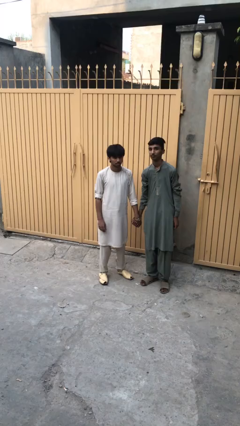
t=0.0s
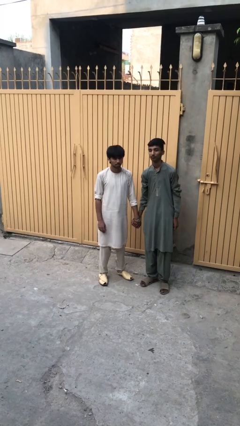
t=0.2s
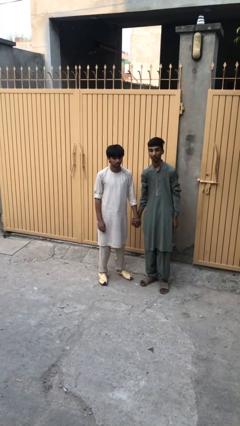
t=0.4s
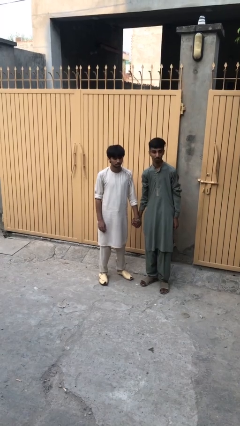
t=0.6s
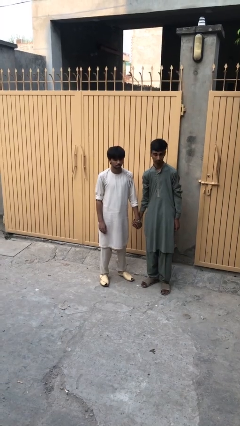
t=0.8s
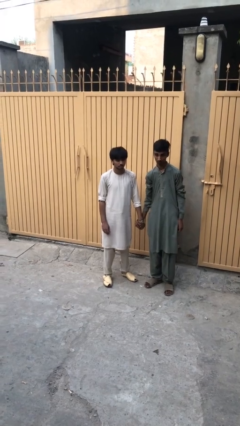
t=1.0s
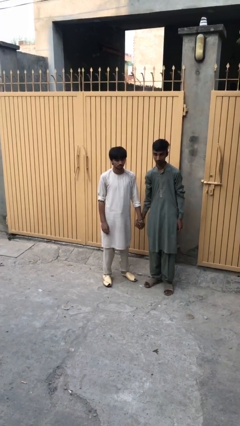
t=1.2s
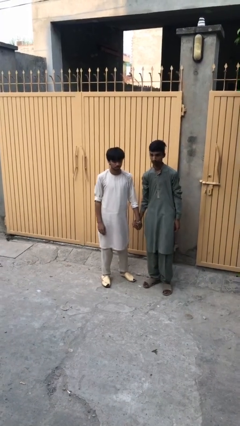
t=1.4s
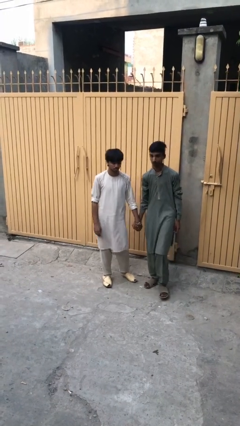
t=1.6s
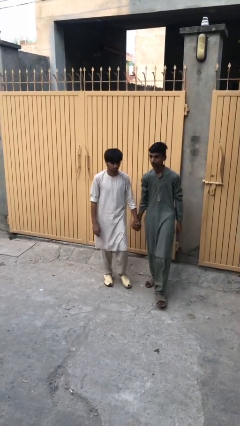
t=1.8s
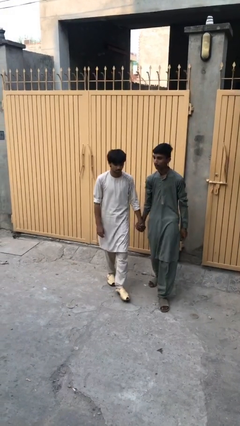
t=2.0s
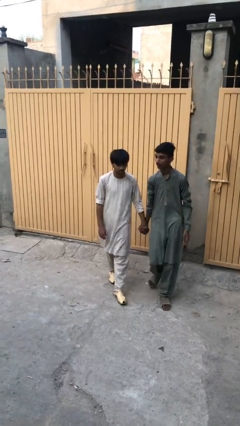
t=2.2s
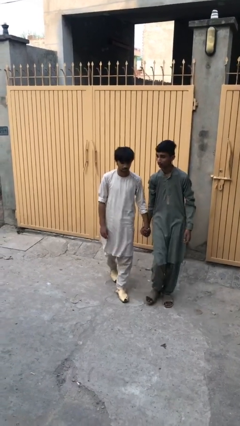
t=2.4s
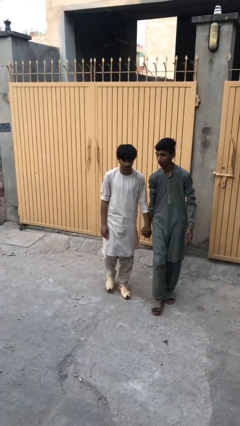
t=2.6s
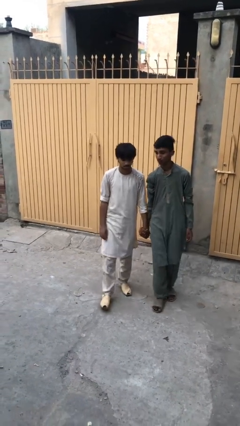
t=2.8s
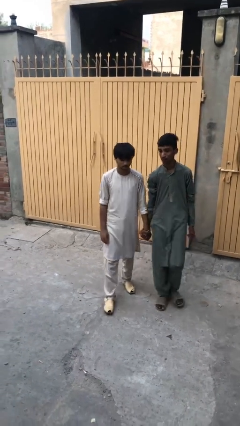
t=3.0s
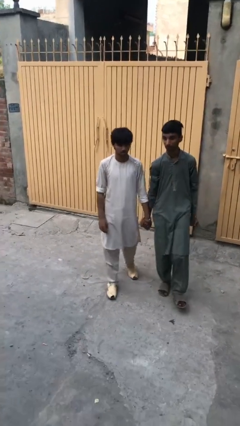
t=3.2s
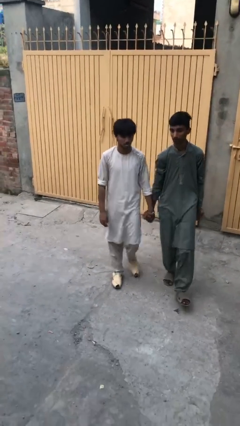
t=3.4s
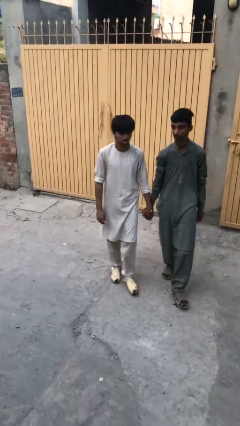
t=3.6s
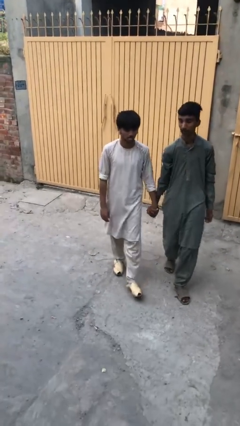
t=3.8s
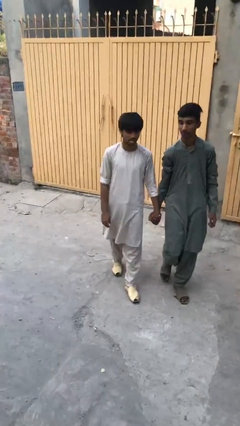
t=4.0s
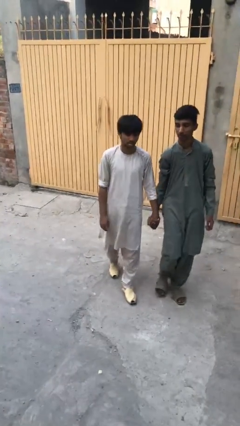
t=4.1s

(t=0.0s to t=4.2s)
person holds hand

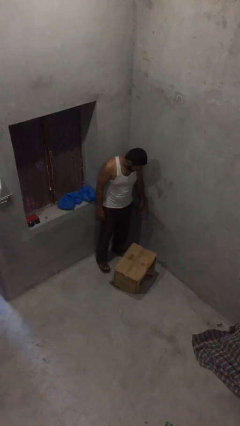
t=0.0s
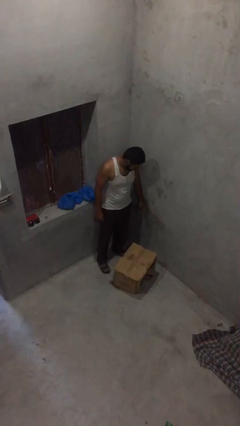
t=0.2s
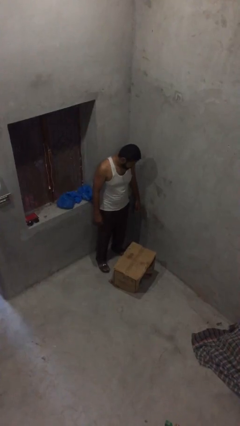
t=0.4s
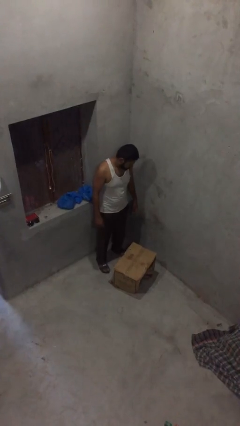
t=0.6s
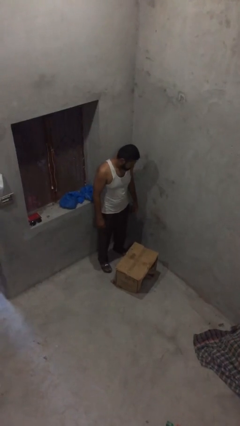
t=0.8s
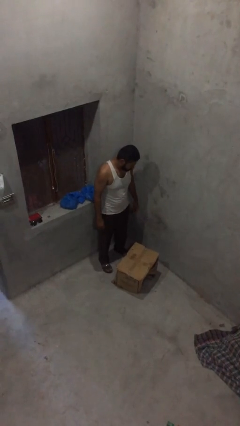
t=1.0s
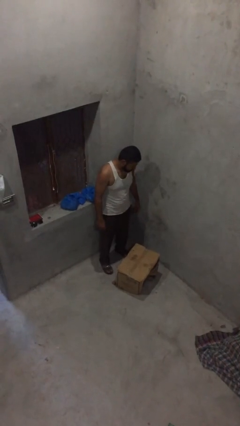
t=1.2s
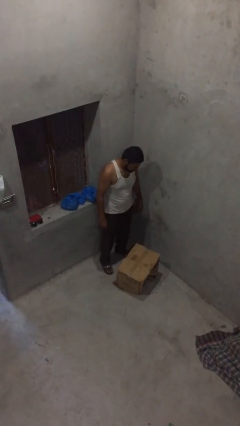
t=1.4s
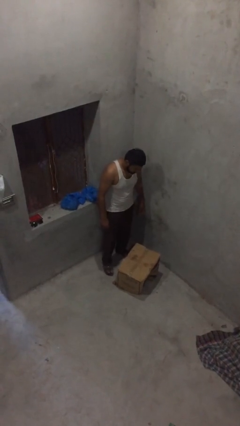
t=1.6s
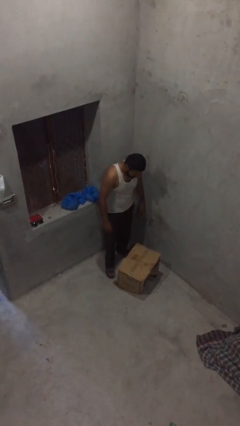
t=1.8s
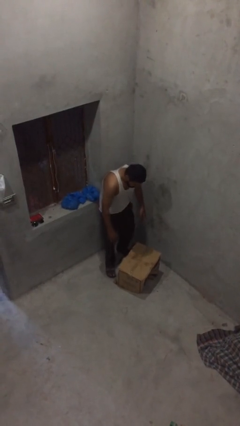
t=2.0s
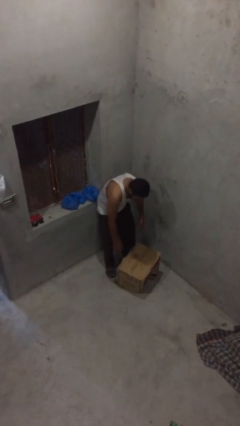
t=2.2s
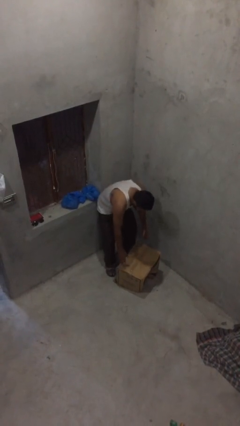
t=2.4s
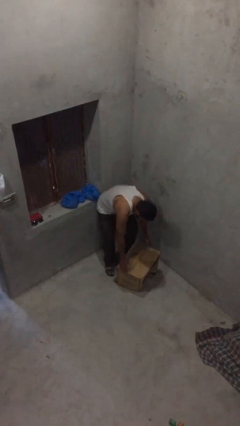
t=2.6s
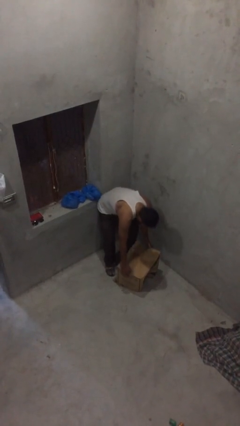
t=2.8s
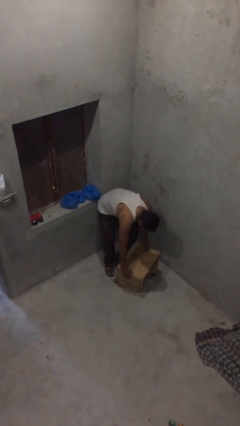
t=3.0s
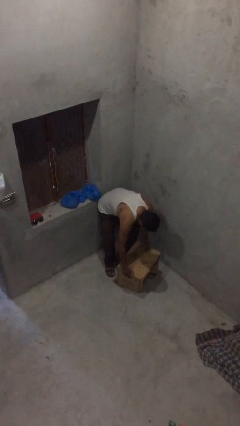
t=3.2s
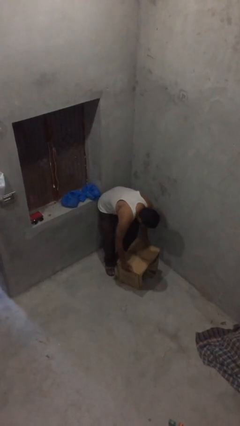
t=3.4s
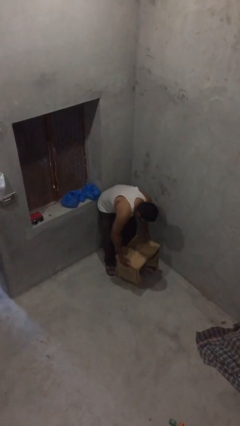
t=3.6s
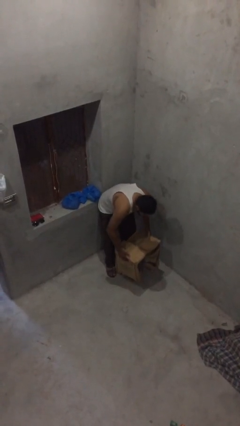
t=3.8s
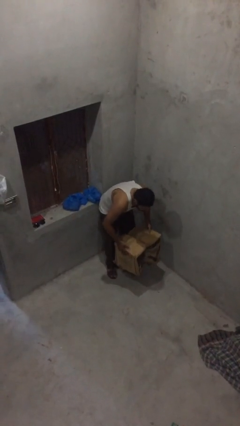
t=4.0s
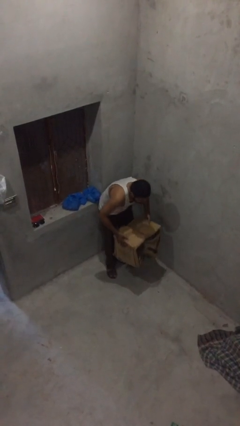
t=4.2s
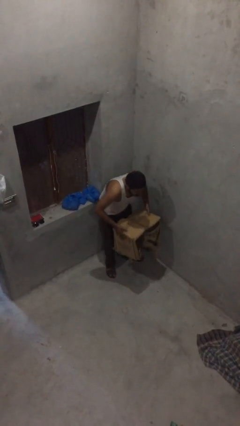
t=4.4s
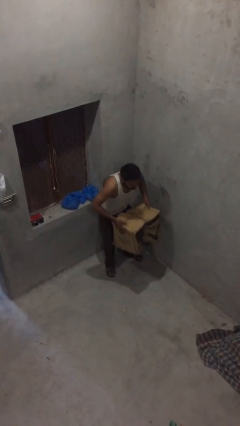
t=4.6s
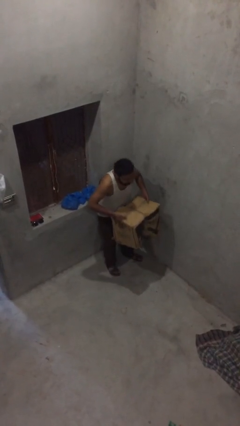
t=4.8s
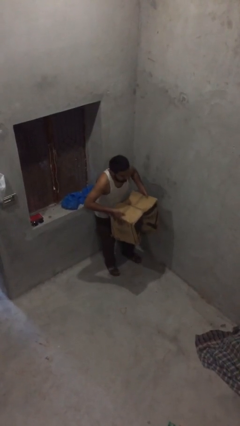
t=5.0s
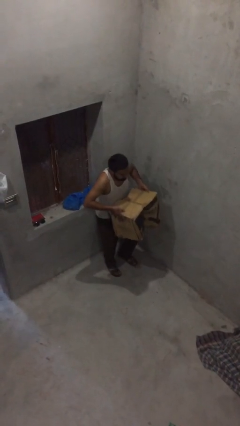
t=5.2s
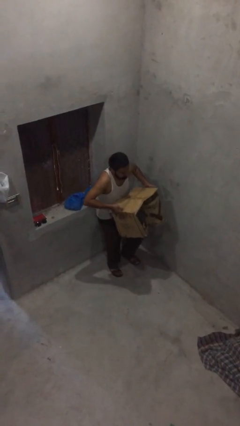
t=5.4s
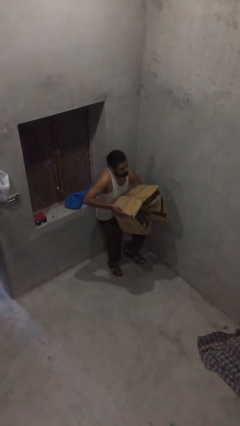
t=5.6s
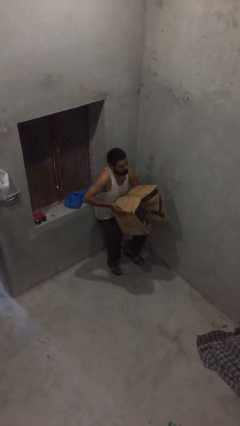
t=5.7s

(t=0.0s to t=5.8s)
person picks up object from floor

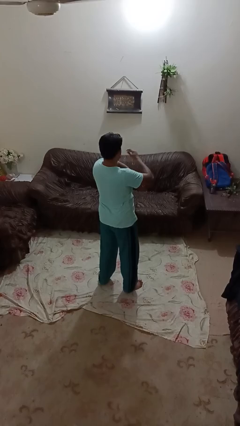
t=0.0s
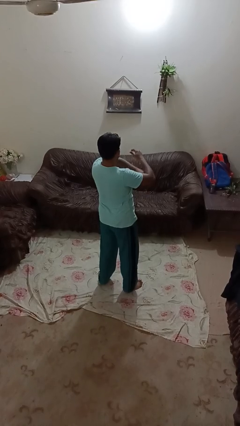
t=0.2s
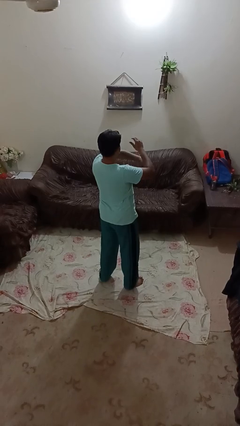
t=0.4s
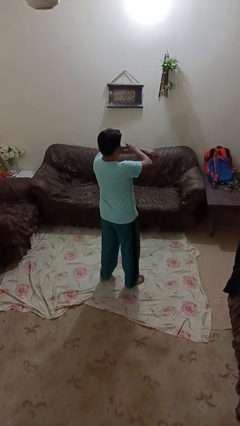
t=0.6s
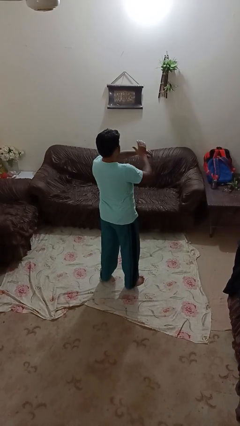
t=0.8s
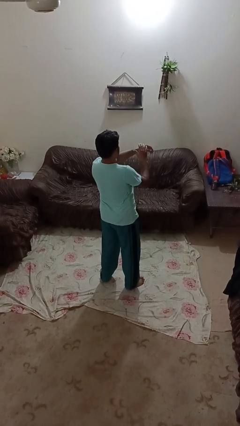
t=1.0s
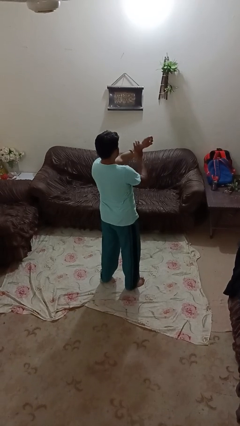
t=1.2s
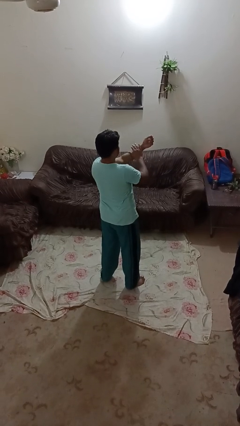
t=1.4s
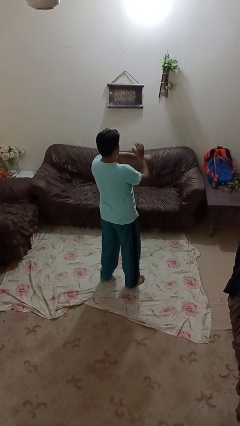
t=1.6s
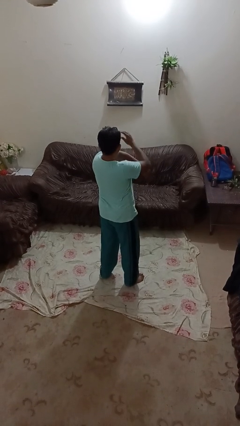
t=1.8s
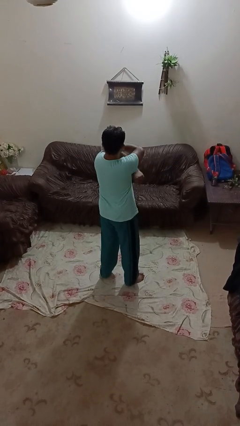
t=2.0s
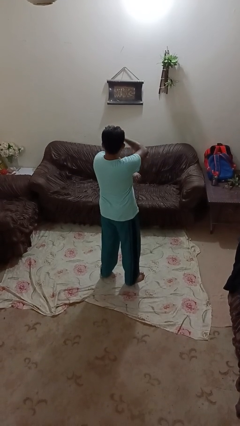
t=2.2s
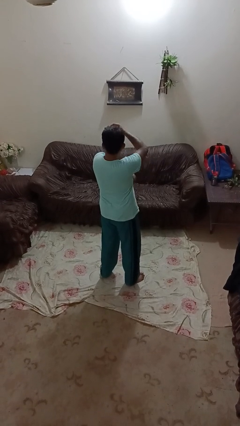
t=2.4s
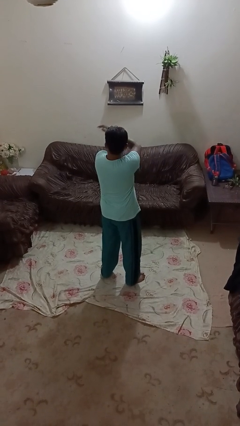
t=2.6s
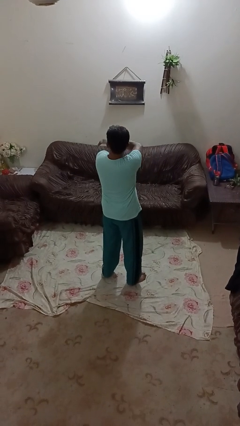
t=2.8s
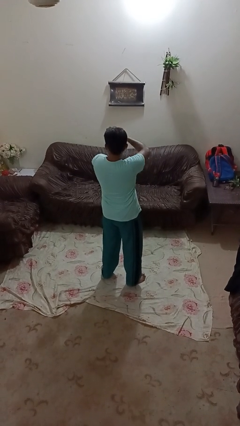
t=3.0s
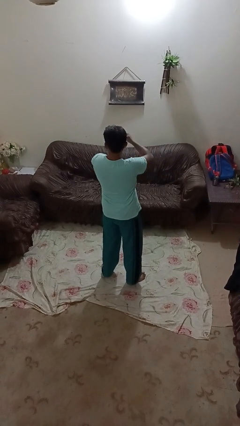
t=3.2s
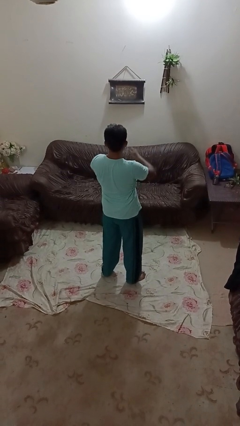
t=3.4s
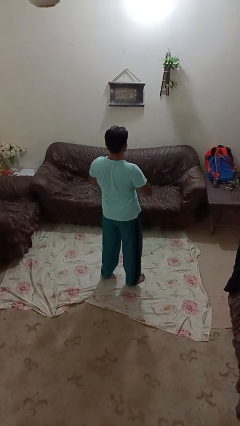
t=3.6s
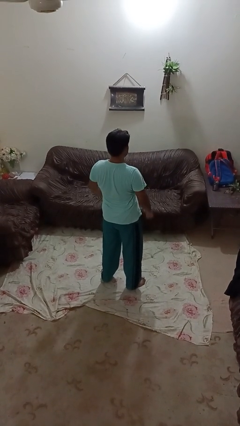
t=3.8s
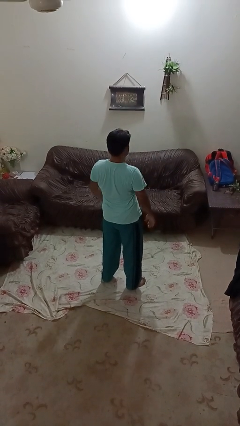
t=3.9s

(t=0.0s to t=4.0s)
person swats bug

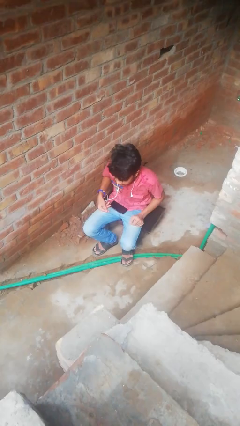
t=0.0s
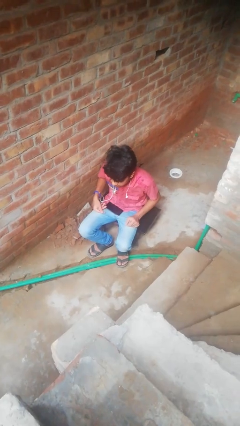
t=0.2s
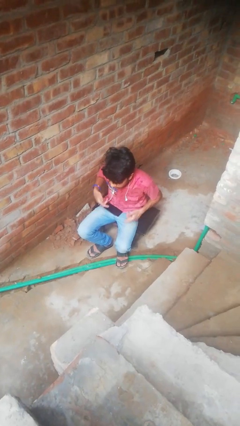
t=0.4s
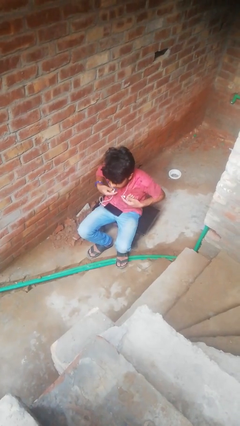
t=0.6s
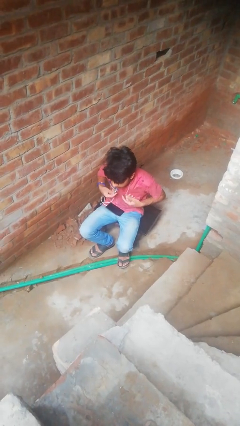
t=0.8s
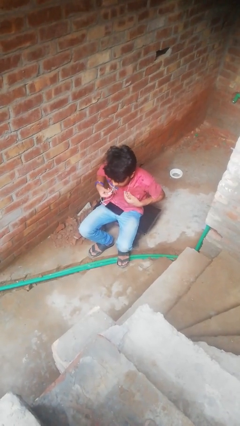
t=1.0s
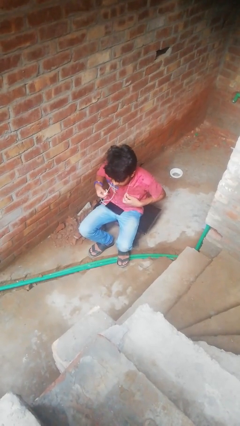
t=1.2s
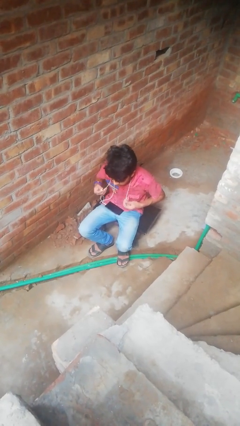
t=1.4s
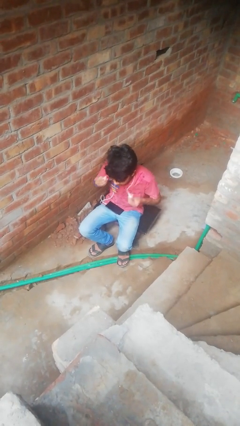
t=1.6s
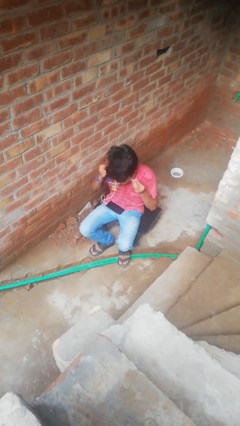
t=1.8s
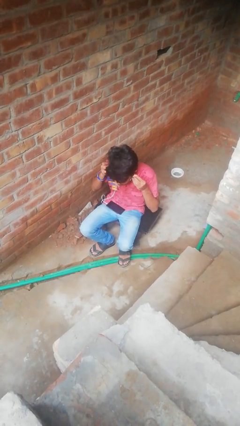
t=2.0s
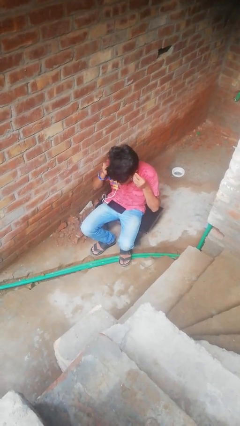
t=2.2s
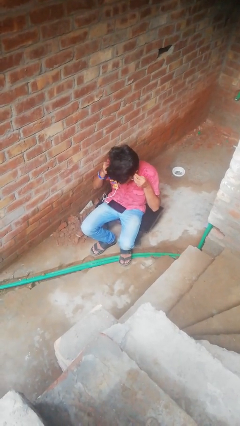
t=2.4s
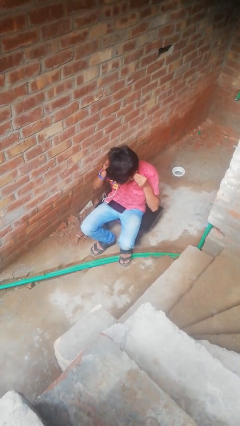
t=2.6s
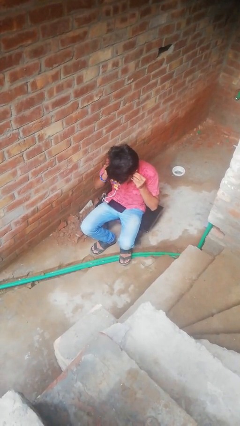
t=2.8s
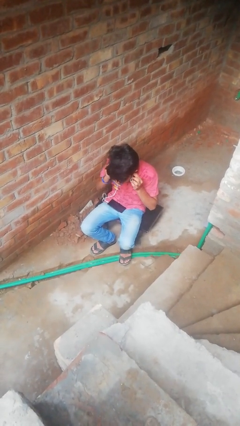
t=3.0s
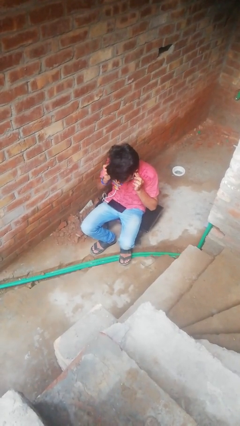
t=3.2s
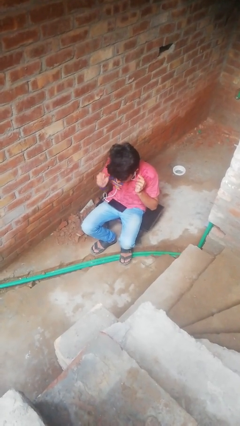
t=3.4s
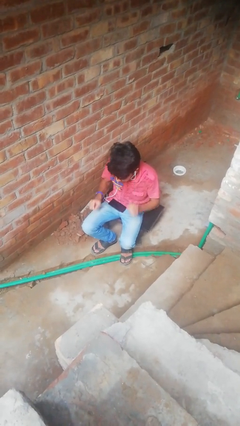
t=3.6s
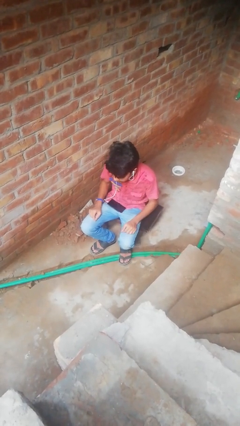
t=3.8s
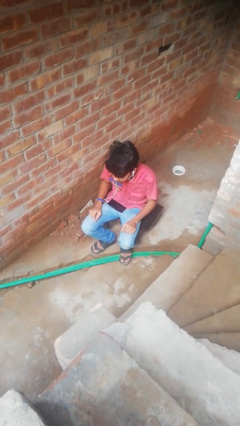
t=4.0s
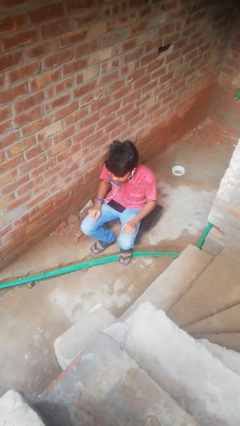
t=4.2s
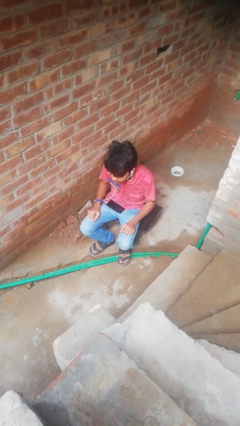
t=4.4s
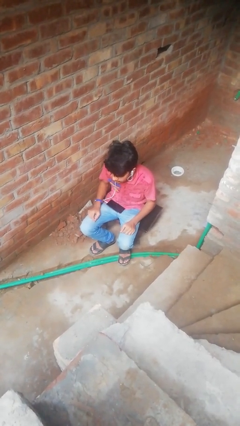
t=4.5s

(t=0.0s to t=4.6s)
person puts on headphones
